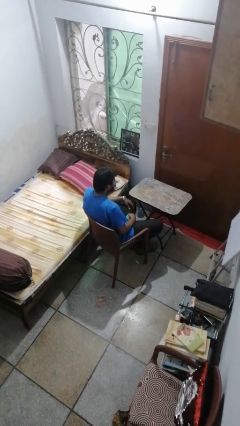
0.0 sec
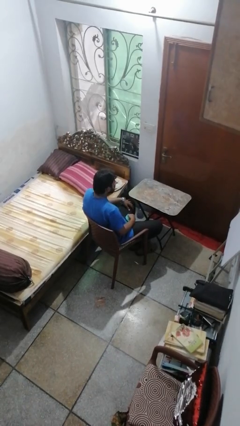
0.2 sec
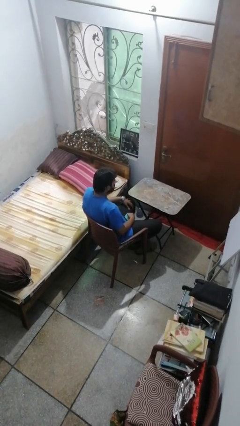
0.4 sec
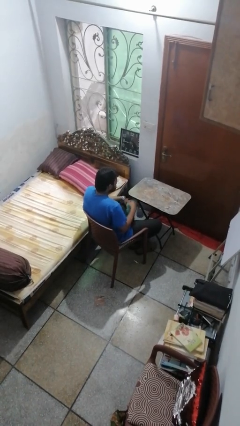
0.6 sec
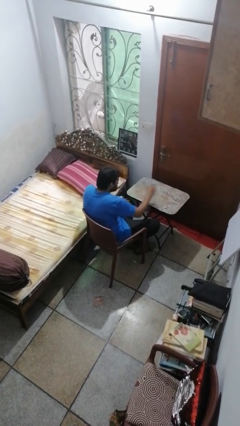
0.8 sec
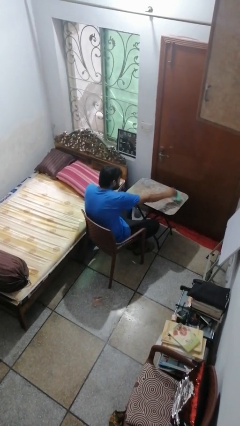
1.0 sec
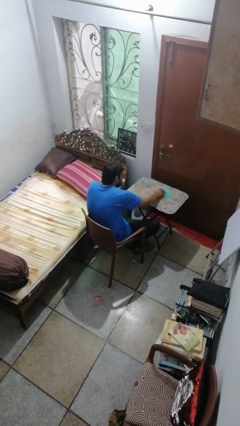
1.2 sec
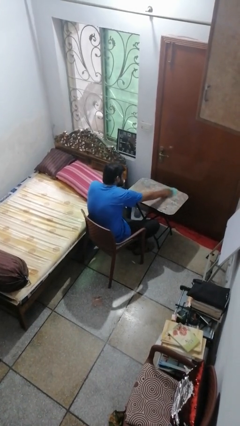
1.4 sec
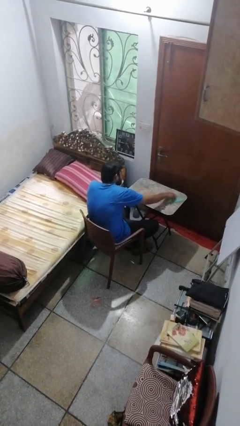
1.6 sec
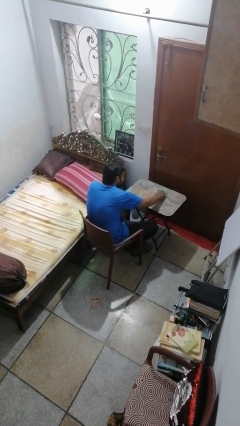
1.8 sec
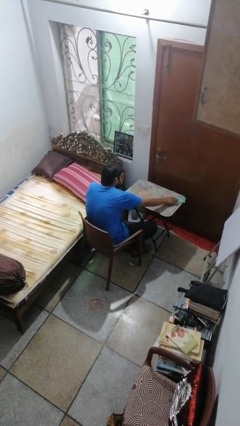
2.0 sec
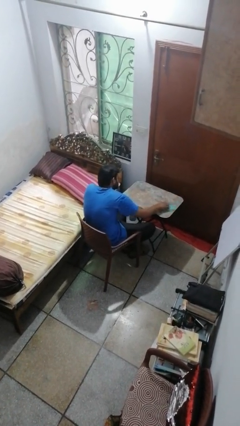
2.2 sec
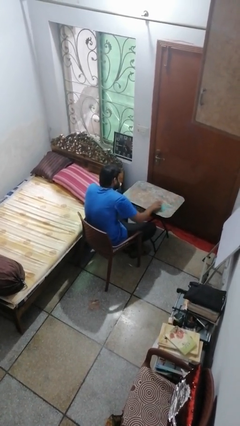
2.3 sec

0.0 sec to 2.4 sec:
person cleans table with rag

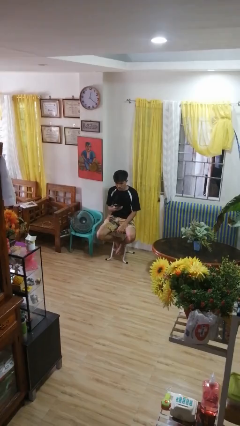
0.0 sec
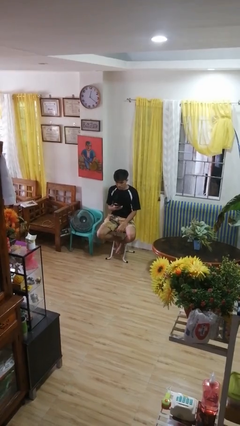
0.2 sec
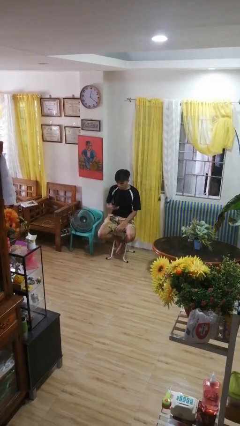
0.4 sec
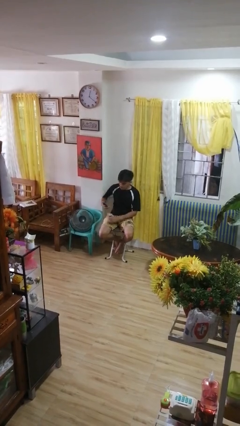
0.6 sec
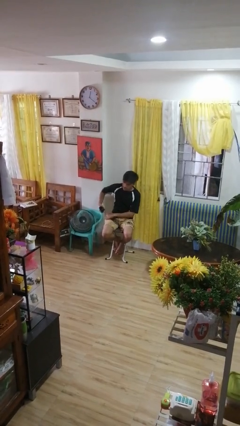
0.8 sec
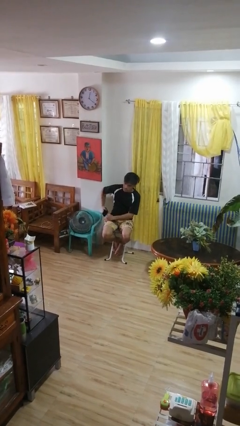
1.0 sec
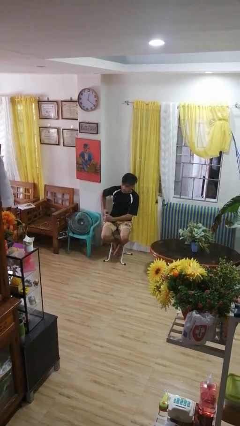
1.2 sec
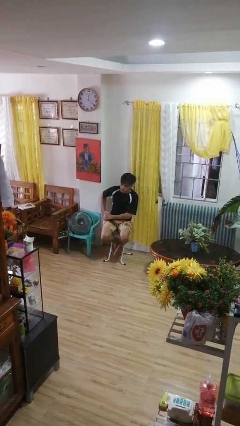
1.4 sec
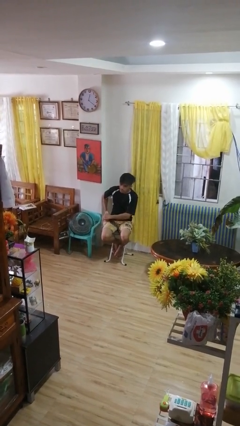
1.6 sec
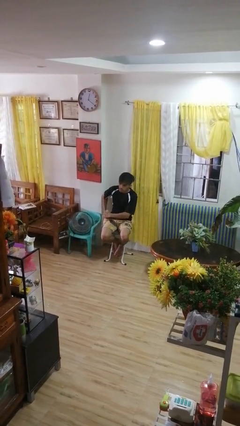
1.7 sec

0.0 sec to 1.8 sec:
person puts phone into pocket

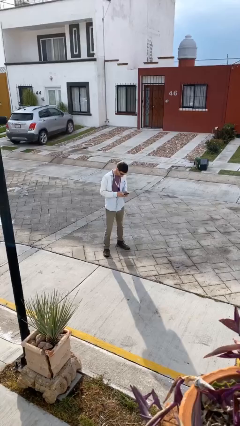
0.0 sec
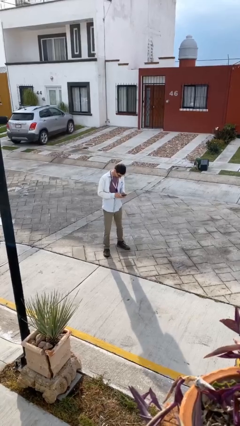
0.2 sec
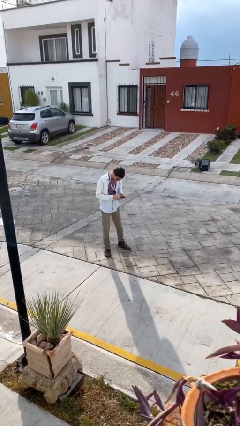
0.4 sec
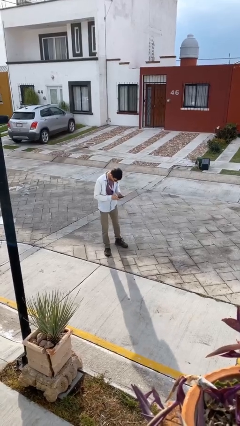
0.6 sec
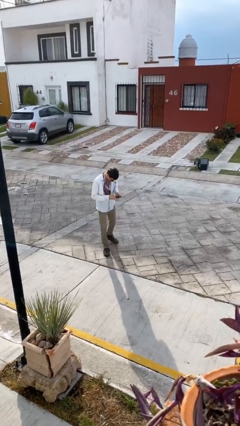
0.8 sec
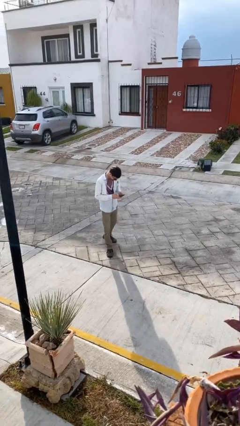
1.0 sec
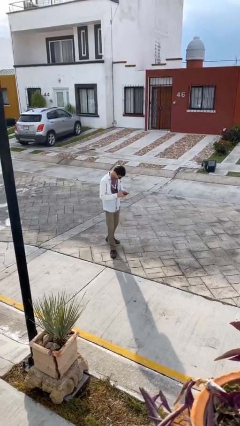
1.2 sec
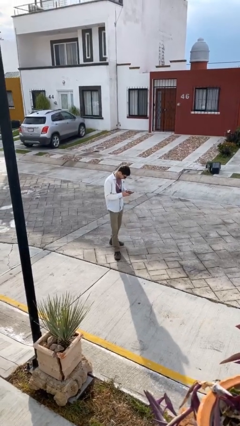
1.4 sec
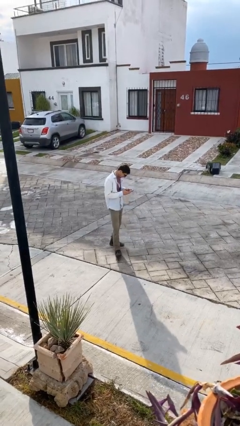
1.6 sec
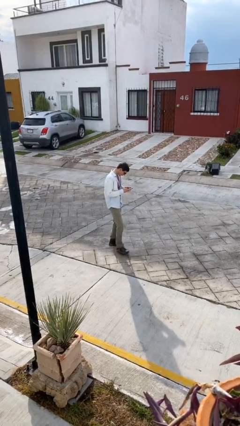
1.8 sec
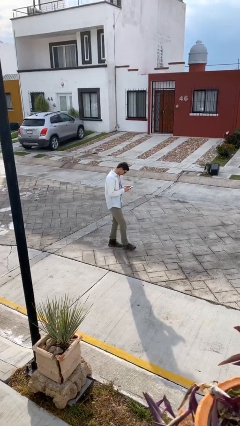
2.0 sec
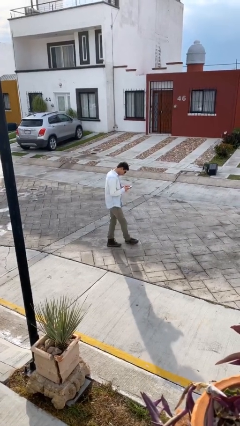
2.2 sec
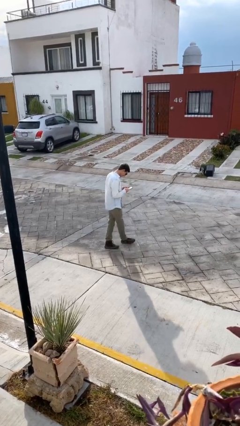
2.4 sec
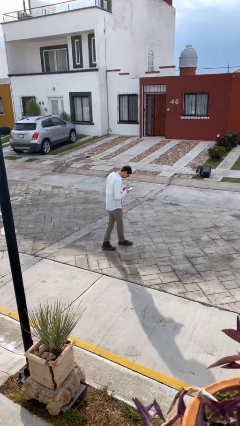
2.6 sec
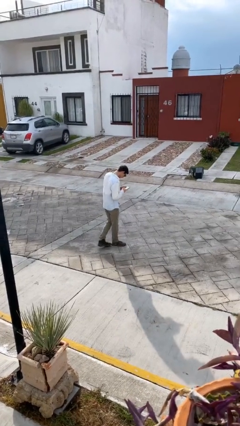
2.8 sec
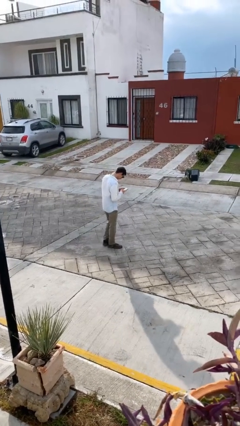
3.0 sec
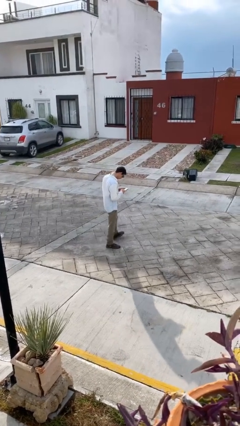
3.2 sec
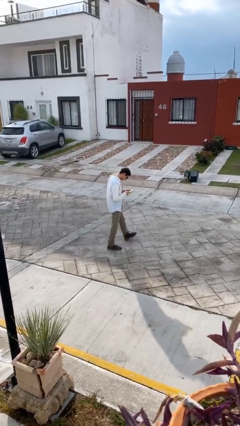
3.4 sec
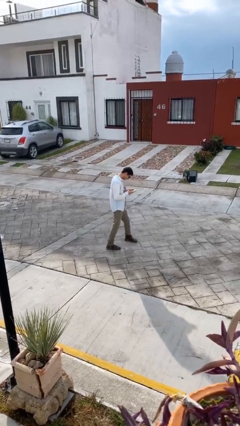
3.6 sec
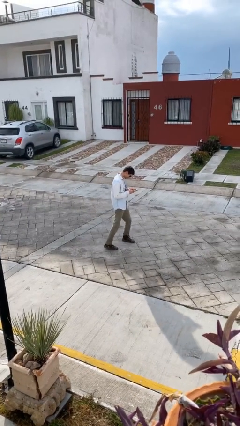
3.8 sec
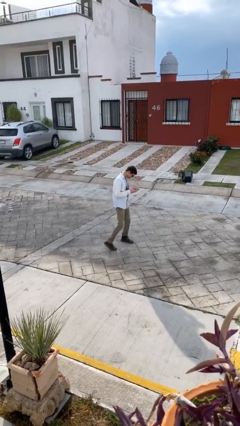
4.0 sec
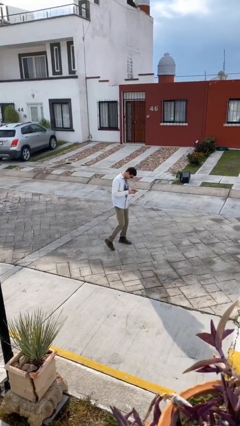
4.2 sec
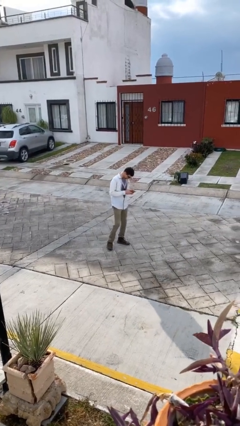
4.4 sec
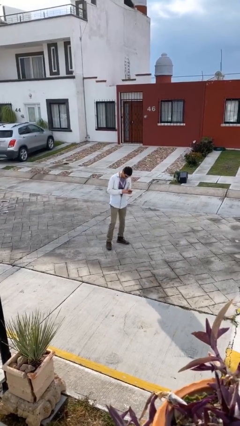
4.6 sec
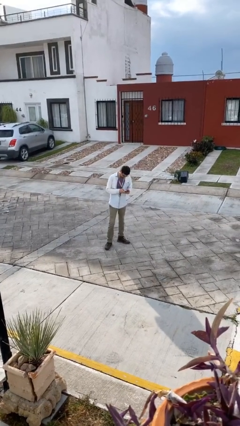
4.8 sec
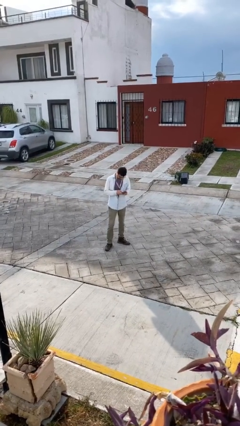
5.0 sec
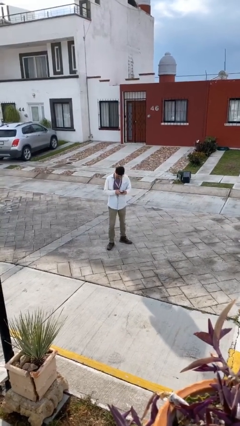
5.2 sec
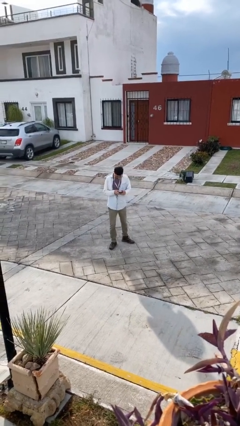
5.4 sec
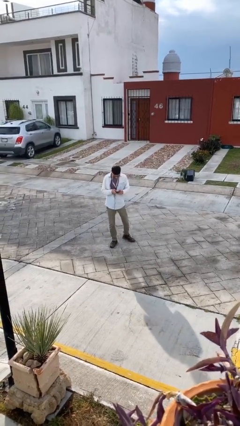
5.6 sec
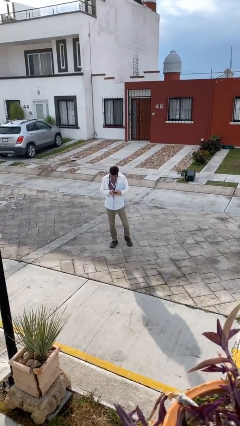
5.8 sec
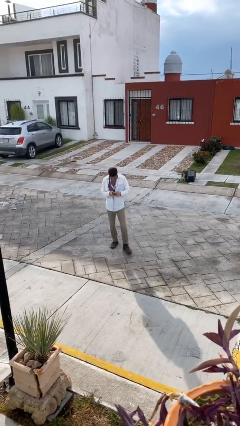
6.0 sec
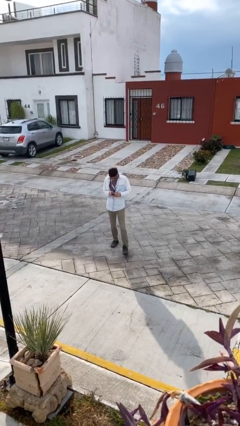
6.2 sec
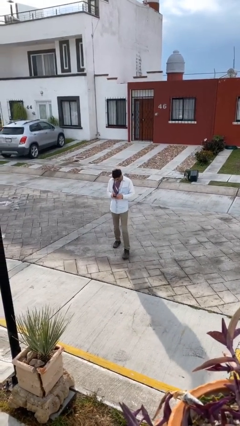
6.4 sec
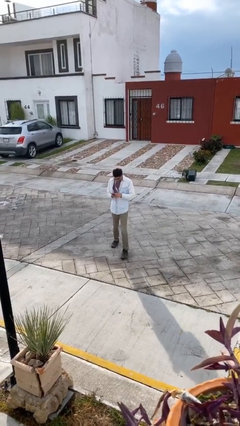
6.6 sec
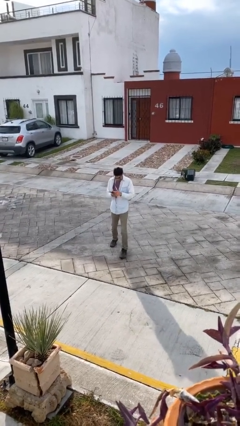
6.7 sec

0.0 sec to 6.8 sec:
person texts on phone

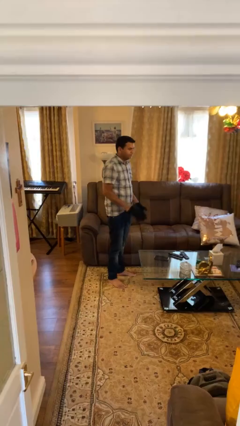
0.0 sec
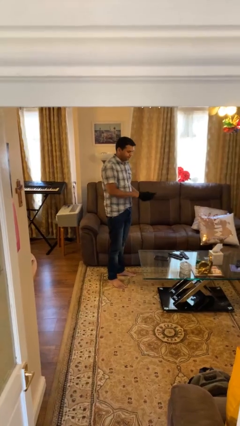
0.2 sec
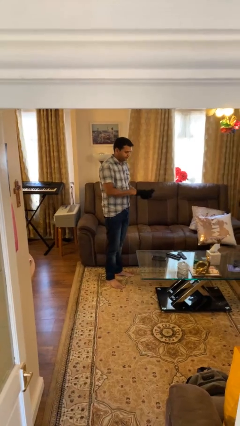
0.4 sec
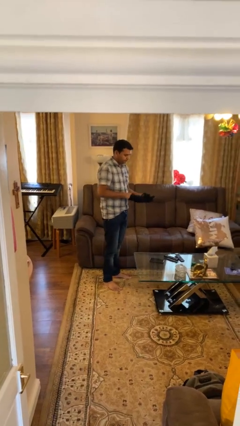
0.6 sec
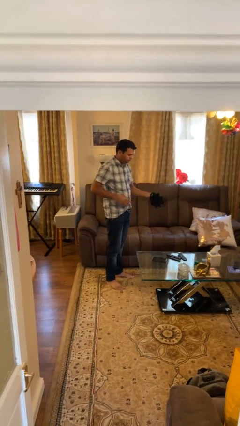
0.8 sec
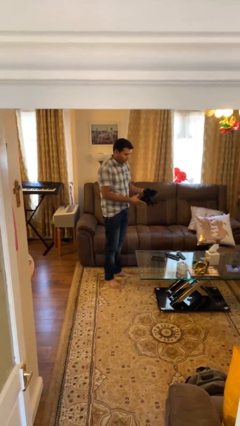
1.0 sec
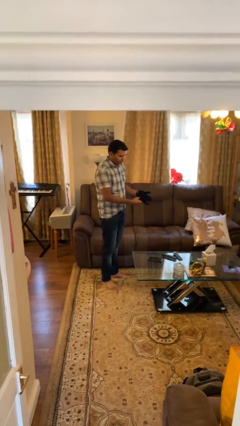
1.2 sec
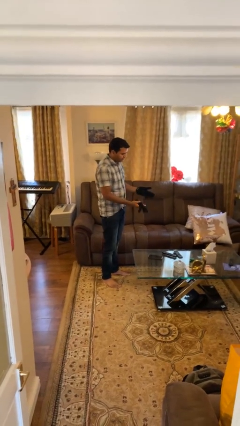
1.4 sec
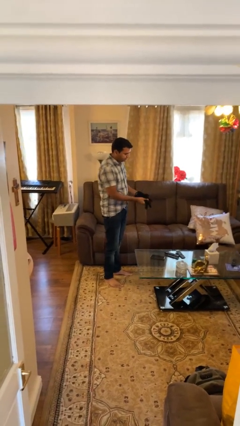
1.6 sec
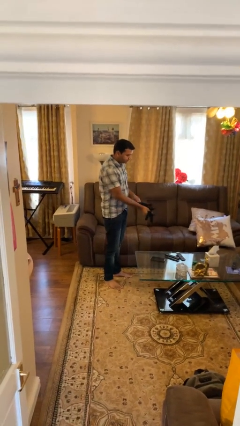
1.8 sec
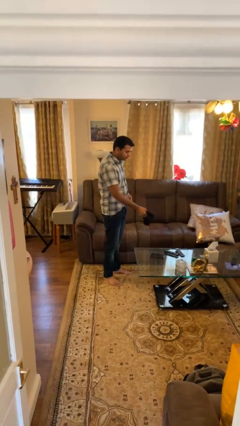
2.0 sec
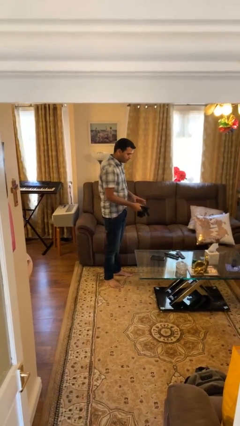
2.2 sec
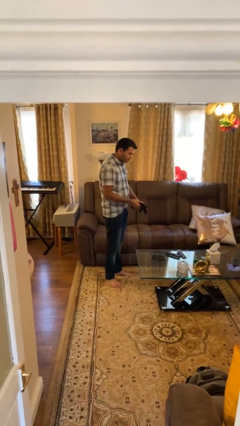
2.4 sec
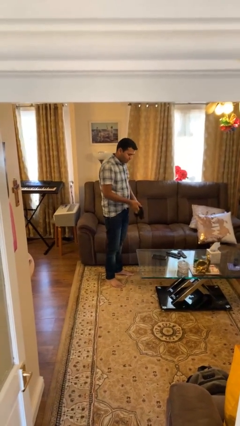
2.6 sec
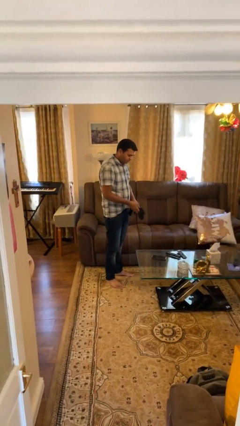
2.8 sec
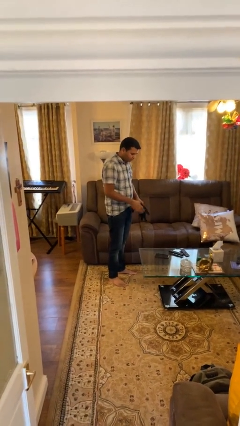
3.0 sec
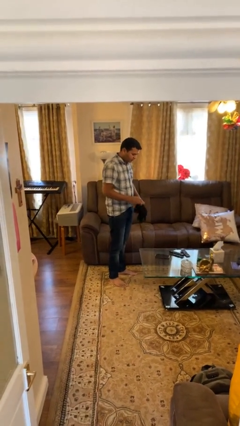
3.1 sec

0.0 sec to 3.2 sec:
person takes off gloves

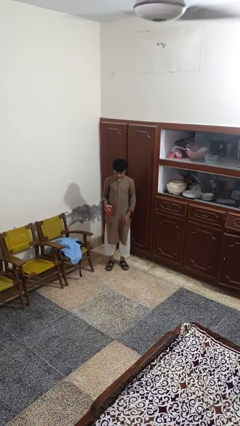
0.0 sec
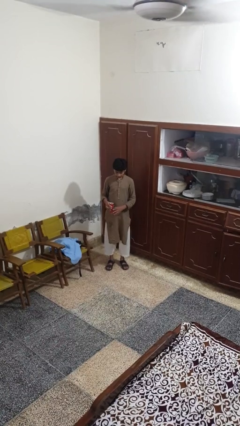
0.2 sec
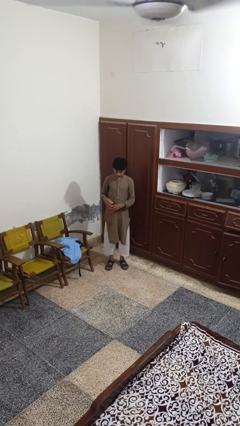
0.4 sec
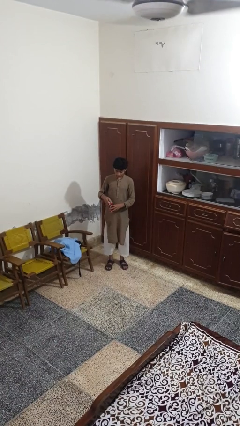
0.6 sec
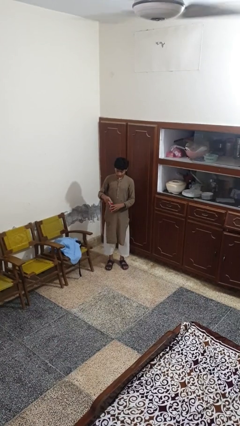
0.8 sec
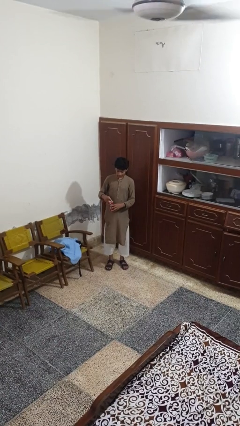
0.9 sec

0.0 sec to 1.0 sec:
person opens beverage can

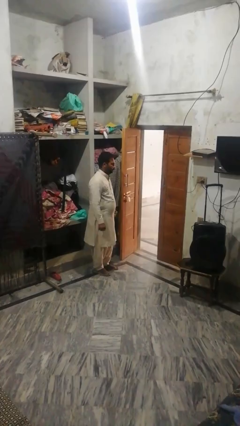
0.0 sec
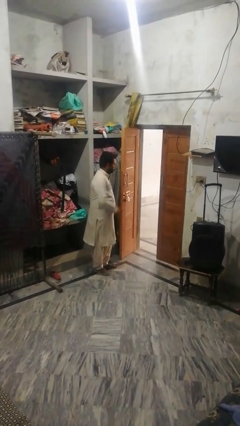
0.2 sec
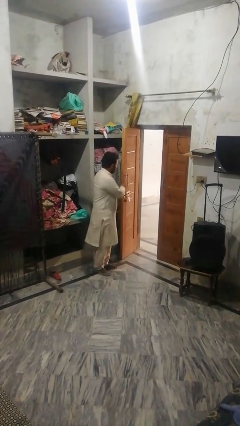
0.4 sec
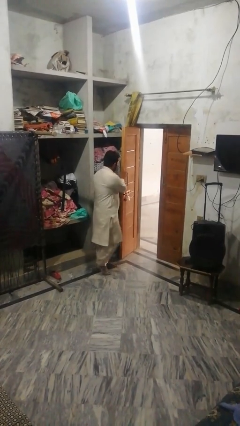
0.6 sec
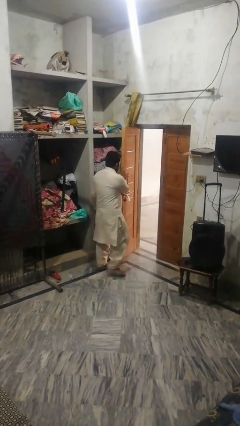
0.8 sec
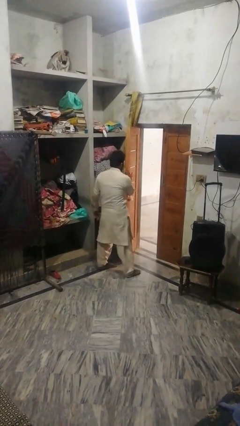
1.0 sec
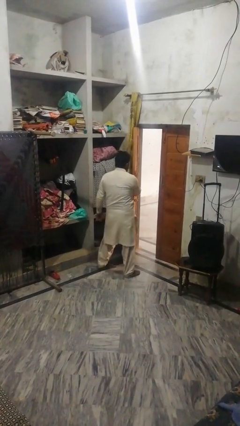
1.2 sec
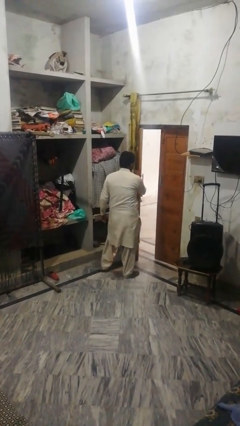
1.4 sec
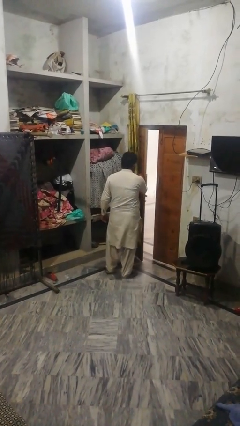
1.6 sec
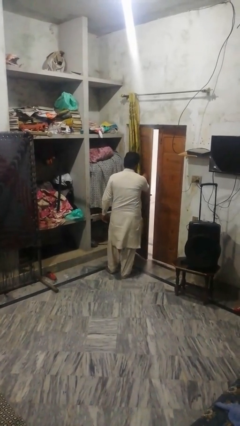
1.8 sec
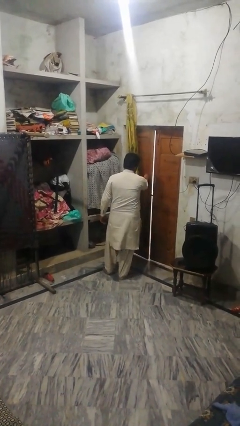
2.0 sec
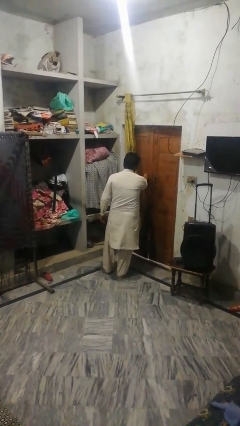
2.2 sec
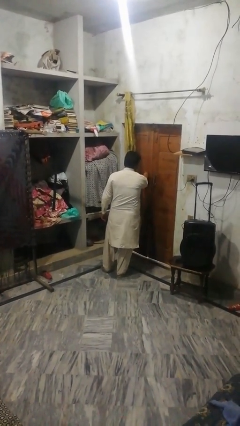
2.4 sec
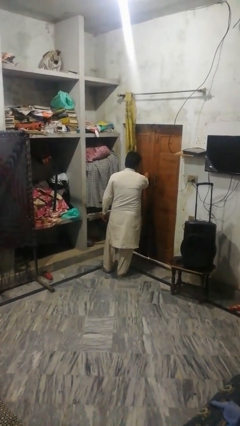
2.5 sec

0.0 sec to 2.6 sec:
person closes facility door
